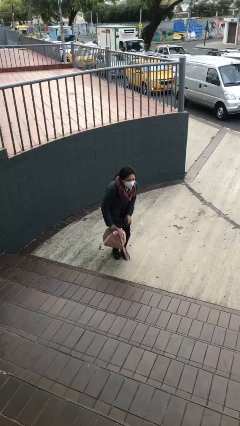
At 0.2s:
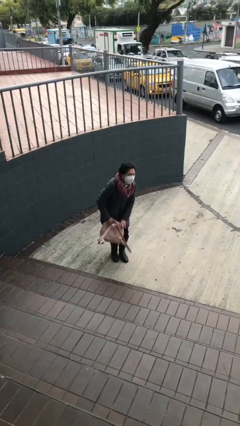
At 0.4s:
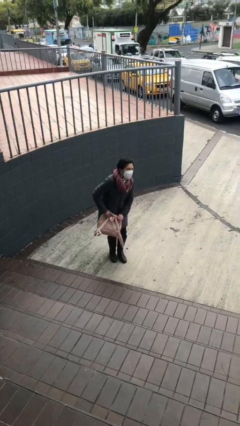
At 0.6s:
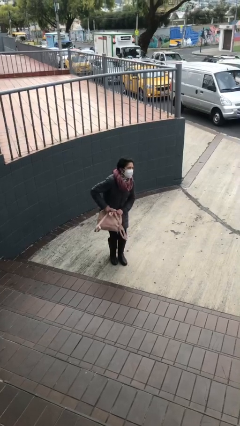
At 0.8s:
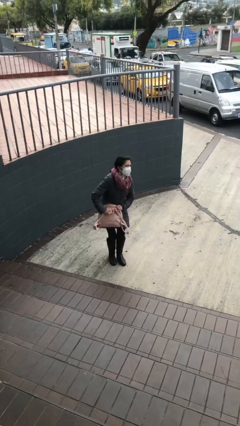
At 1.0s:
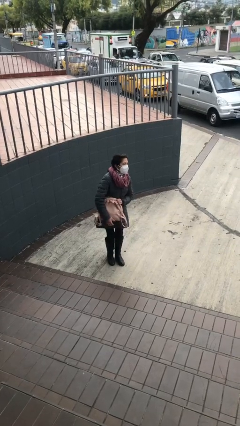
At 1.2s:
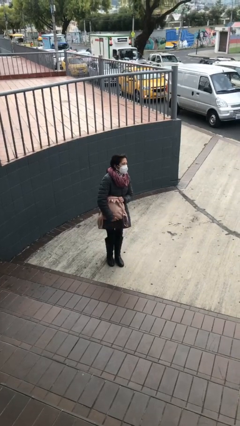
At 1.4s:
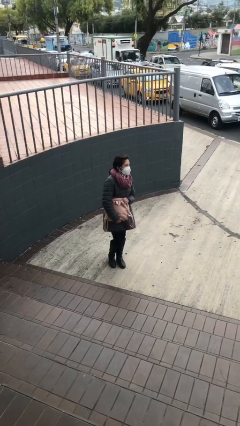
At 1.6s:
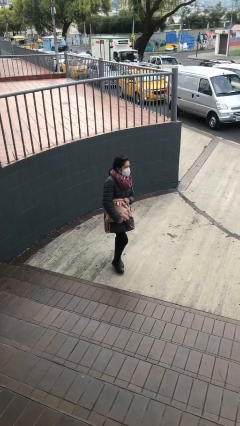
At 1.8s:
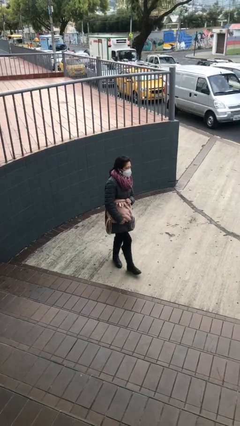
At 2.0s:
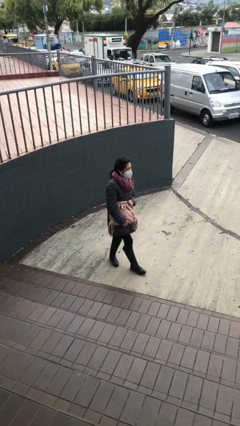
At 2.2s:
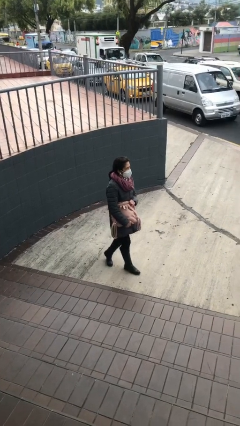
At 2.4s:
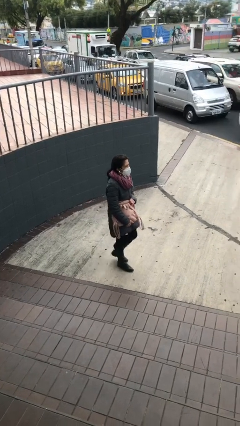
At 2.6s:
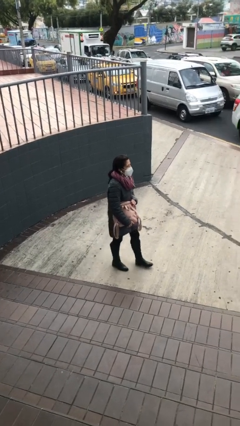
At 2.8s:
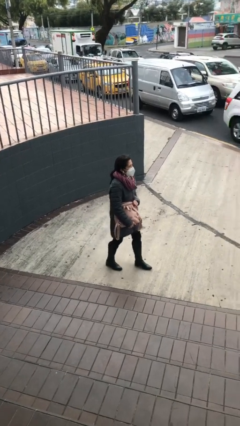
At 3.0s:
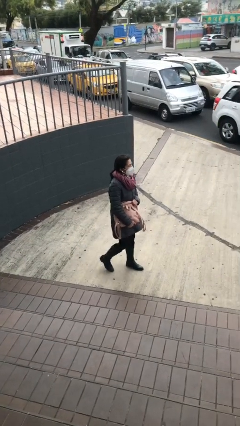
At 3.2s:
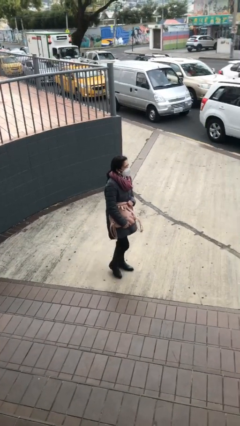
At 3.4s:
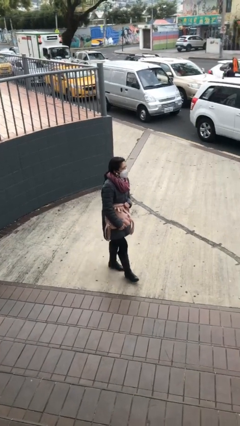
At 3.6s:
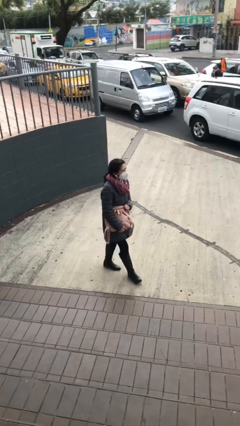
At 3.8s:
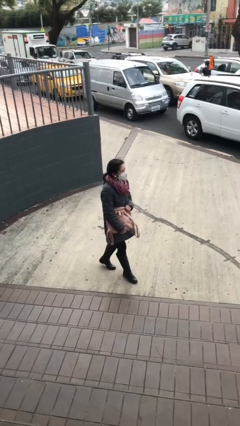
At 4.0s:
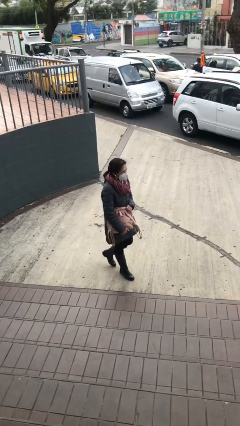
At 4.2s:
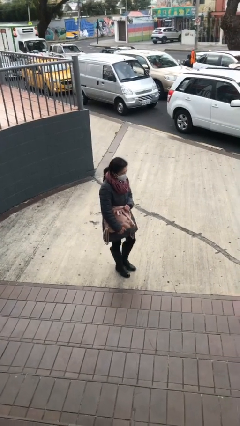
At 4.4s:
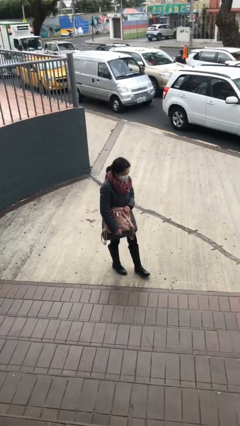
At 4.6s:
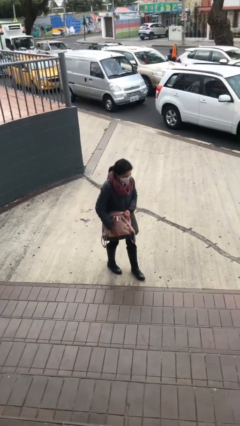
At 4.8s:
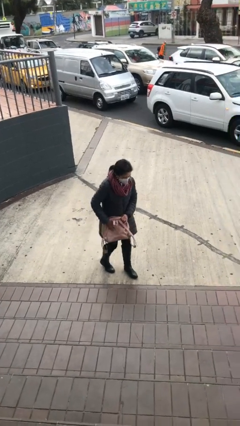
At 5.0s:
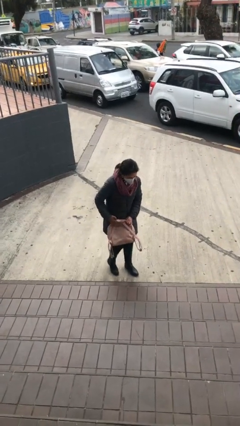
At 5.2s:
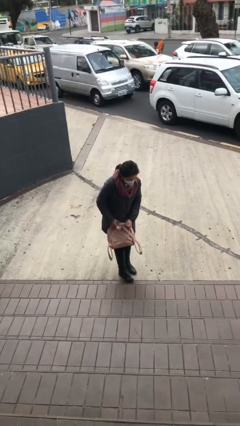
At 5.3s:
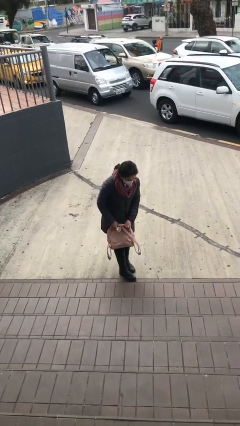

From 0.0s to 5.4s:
person carries heavy object

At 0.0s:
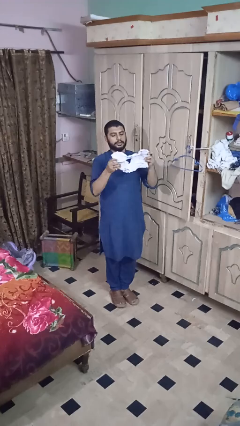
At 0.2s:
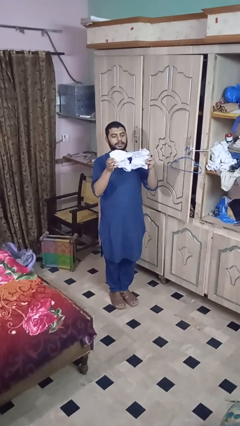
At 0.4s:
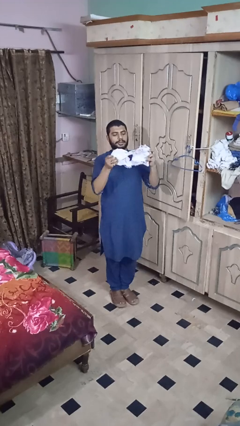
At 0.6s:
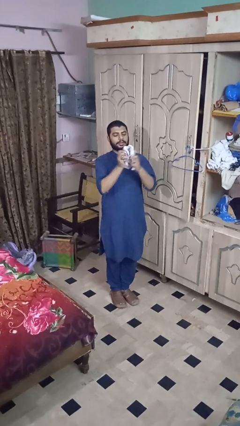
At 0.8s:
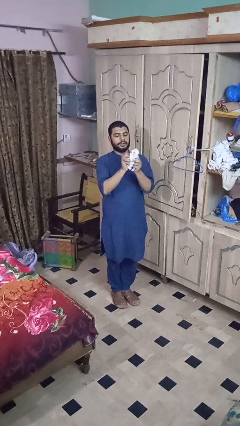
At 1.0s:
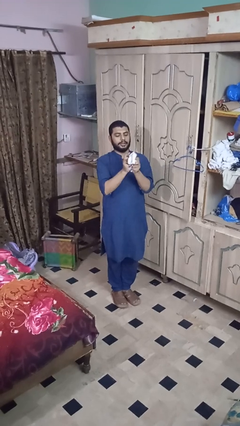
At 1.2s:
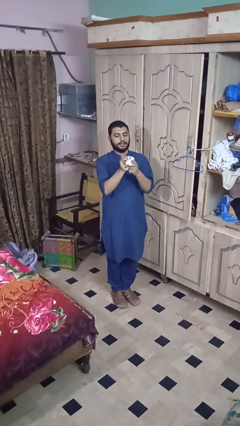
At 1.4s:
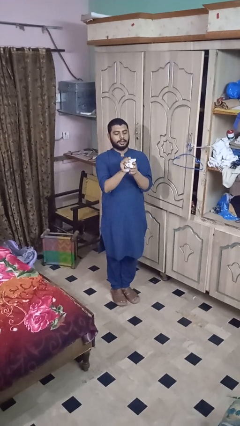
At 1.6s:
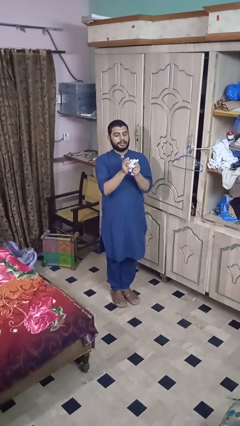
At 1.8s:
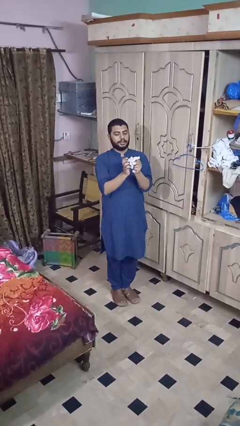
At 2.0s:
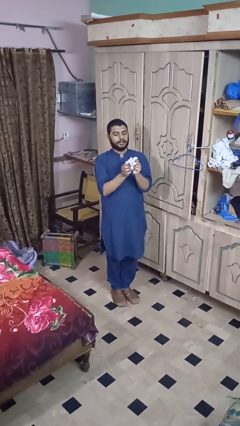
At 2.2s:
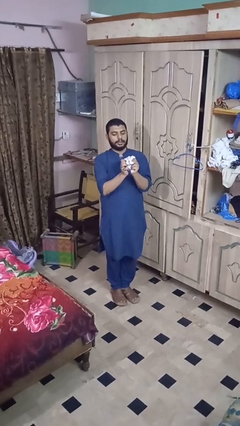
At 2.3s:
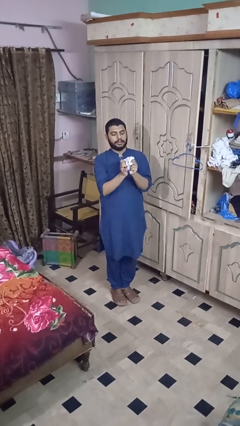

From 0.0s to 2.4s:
person crumples paper

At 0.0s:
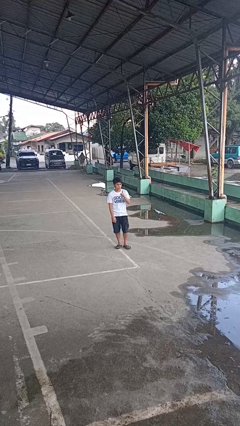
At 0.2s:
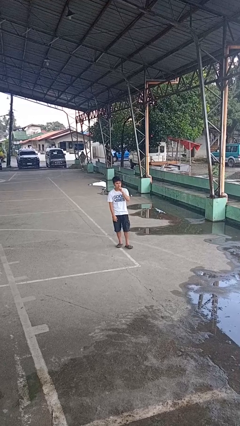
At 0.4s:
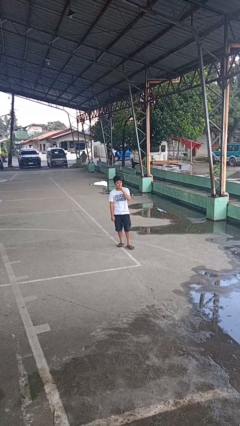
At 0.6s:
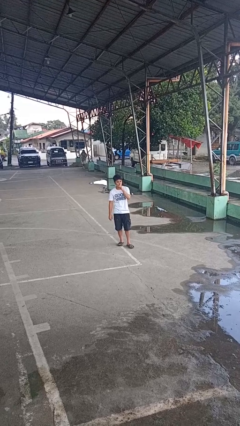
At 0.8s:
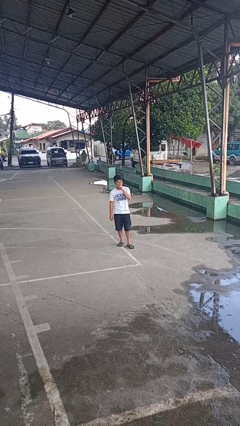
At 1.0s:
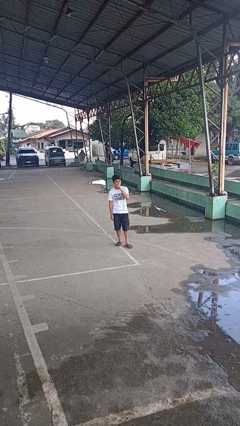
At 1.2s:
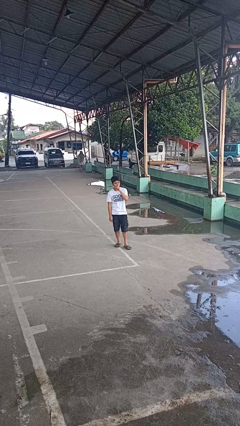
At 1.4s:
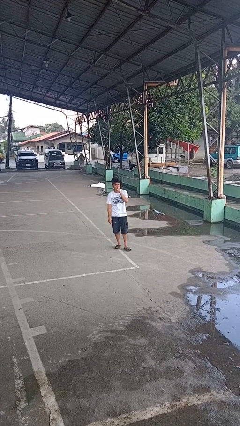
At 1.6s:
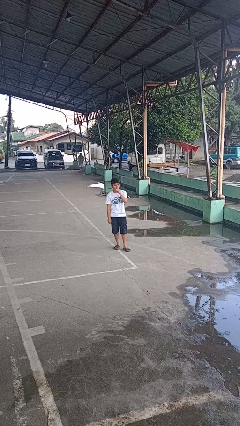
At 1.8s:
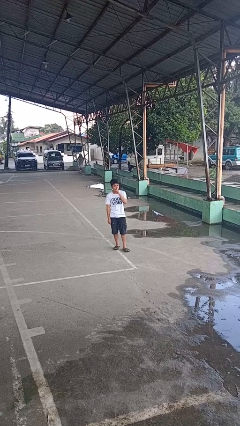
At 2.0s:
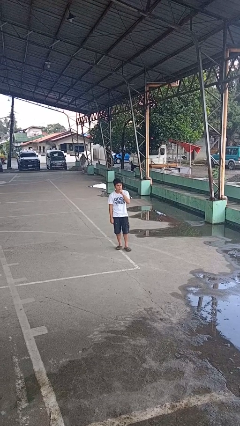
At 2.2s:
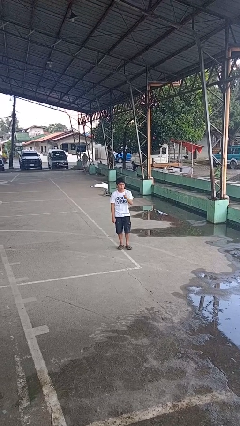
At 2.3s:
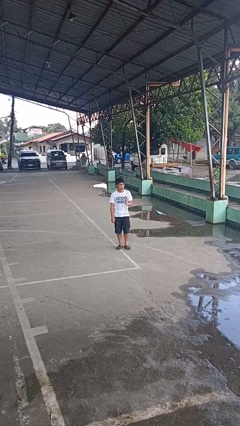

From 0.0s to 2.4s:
person gestures be quiet

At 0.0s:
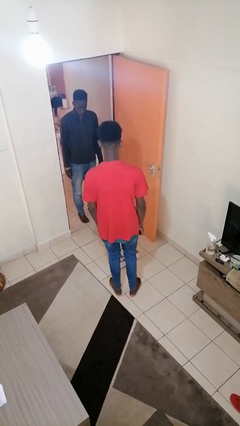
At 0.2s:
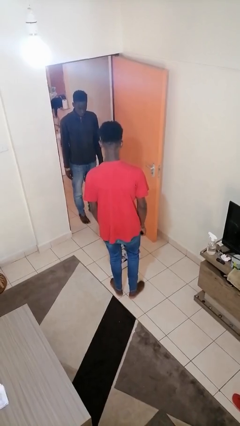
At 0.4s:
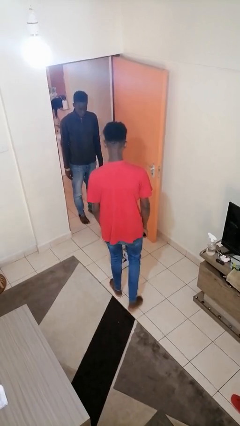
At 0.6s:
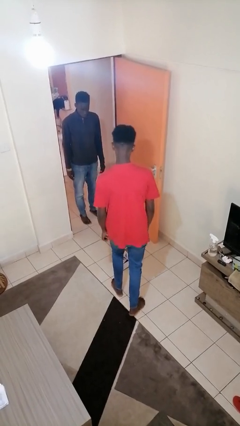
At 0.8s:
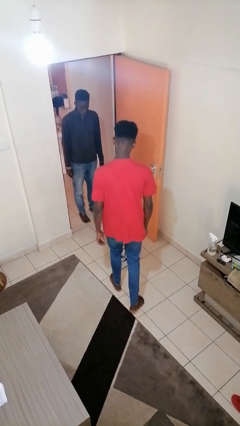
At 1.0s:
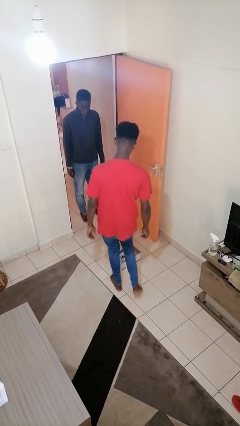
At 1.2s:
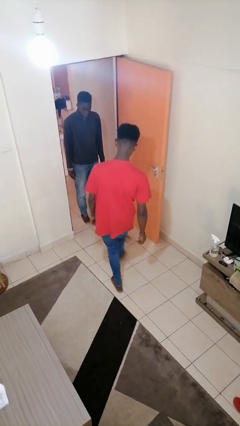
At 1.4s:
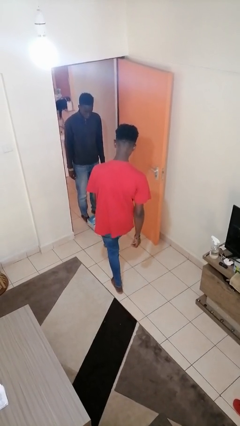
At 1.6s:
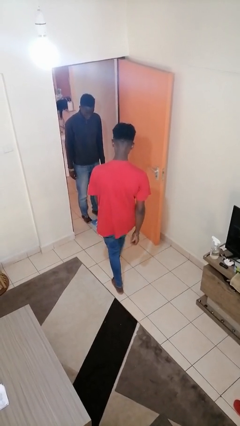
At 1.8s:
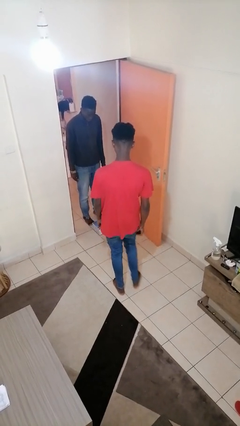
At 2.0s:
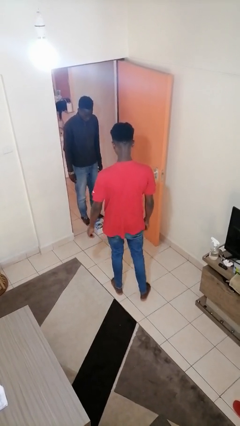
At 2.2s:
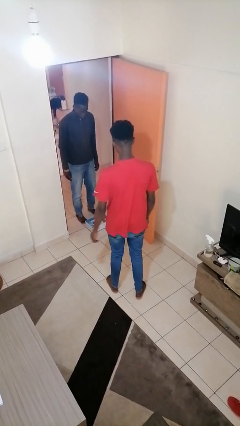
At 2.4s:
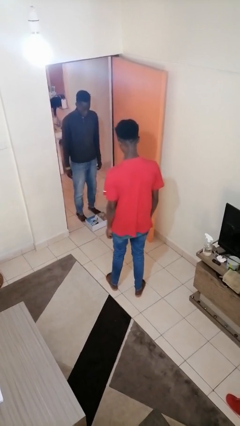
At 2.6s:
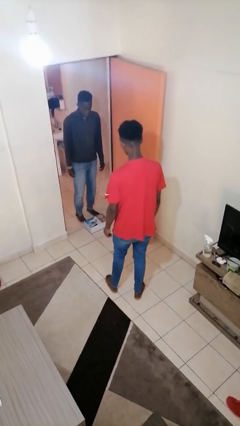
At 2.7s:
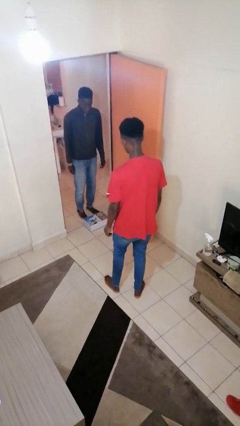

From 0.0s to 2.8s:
person kicks object to person

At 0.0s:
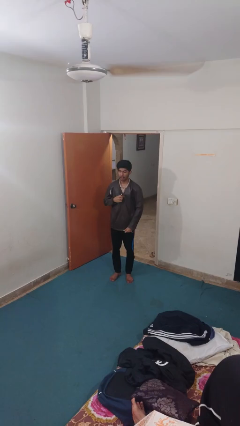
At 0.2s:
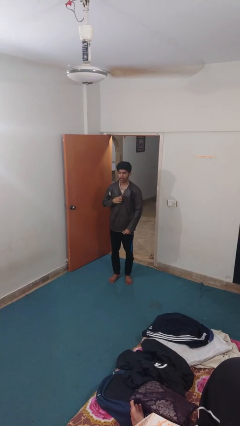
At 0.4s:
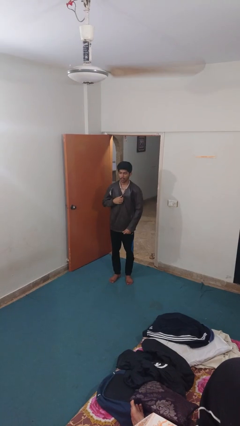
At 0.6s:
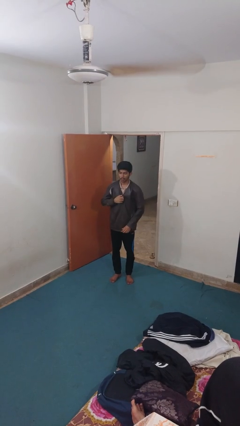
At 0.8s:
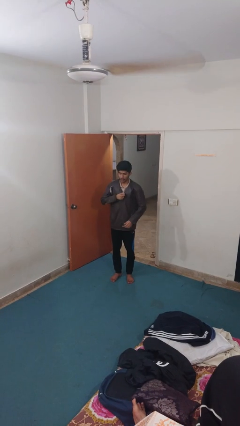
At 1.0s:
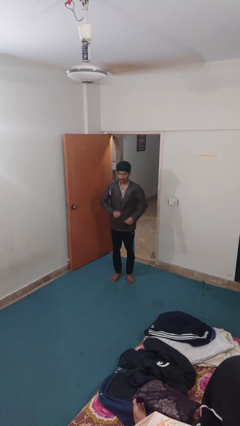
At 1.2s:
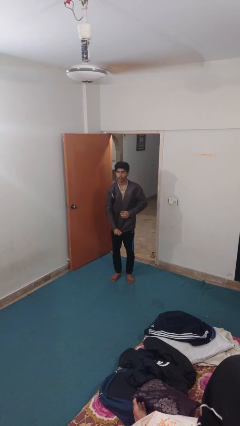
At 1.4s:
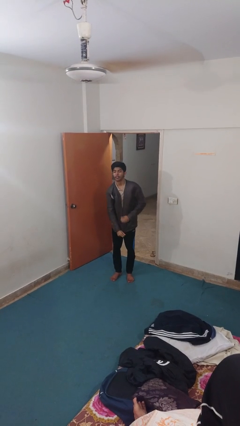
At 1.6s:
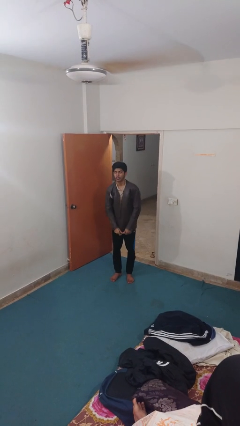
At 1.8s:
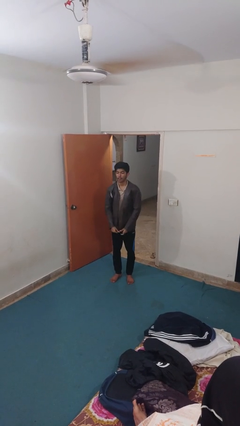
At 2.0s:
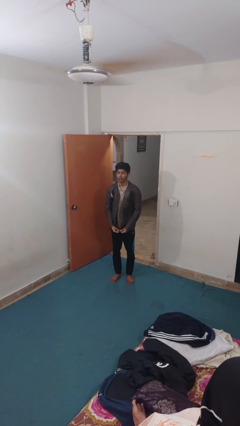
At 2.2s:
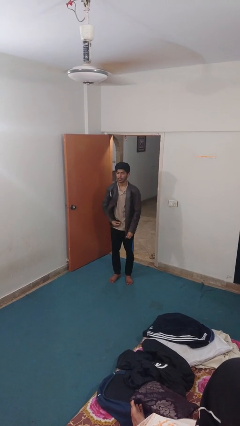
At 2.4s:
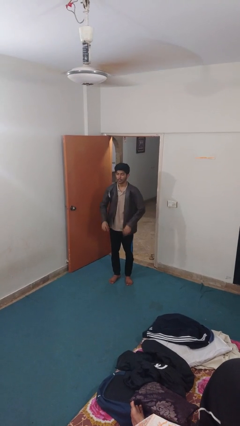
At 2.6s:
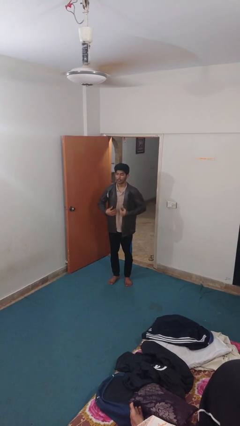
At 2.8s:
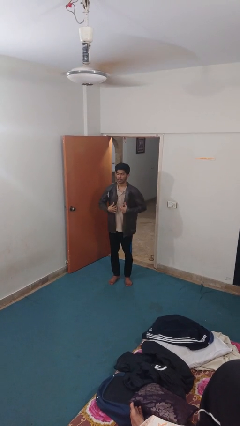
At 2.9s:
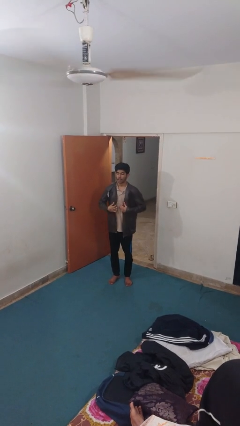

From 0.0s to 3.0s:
person unzips jacket

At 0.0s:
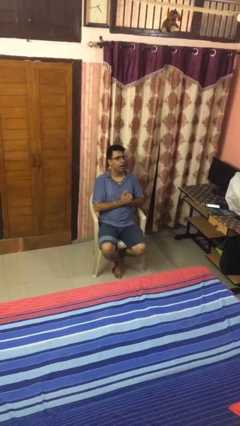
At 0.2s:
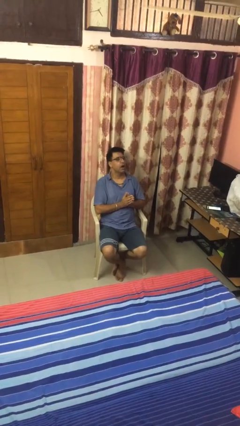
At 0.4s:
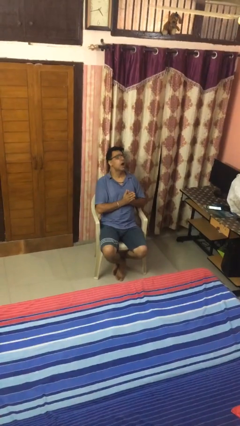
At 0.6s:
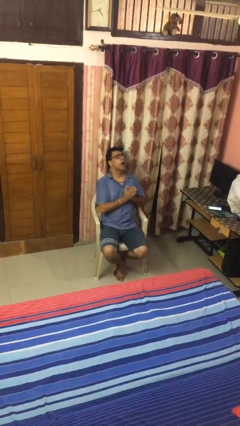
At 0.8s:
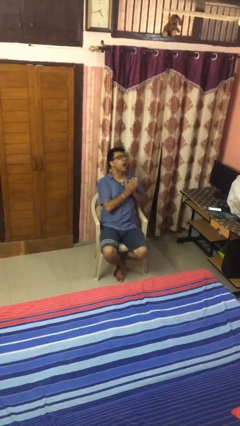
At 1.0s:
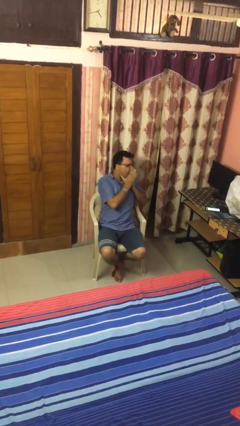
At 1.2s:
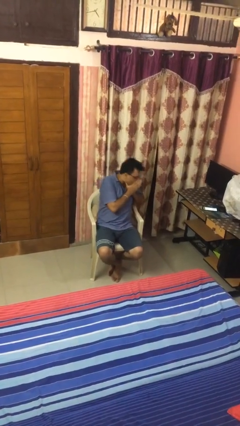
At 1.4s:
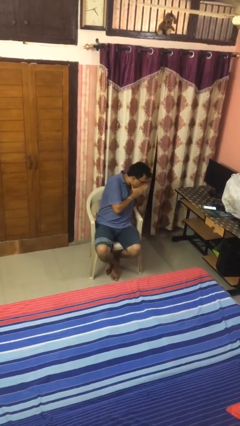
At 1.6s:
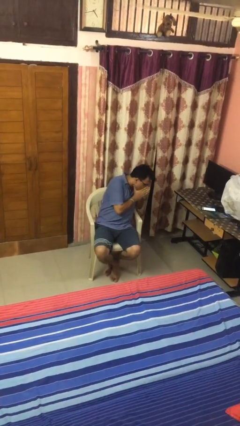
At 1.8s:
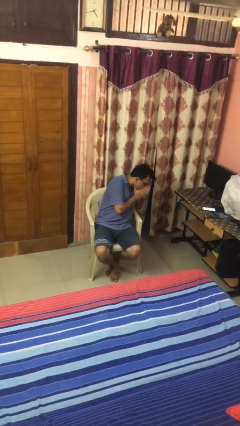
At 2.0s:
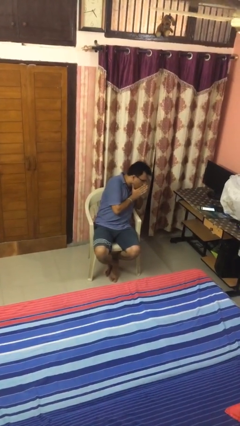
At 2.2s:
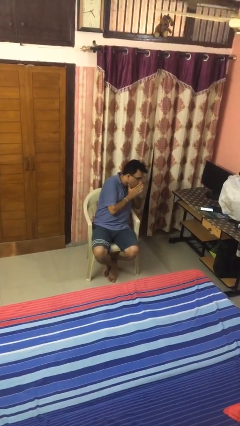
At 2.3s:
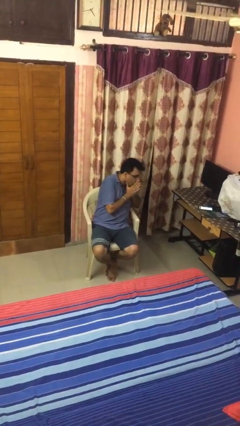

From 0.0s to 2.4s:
person sneezes into hand
